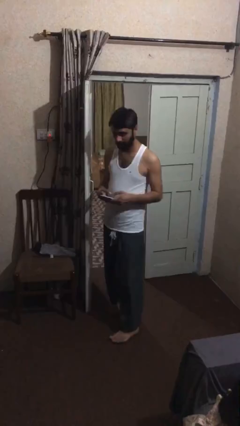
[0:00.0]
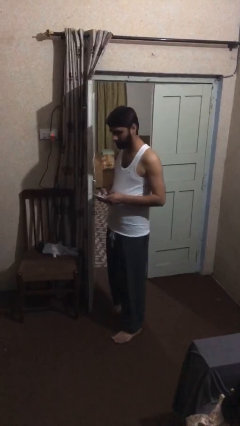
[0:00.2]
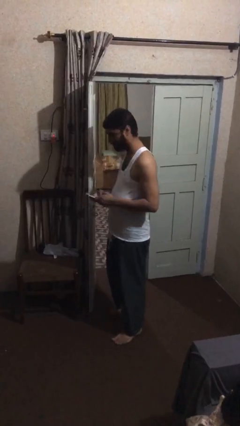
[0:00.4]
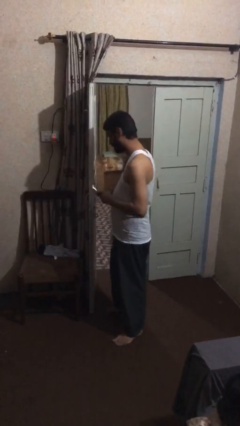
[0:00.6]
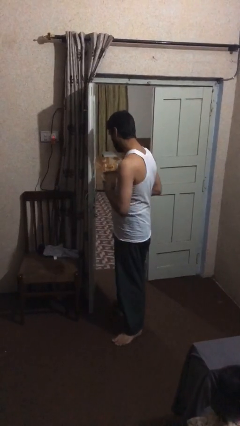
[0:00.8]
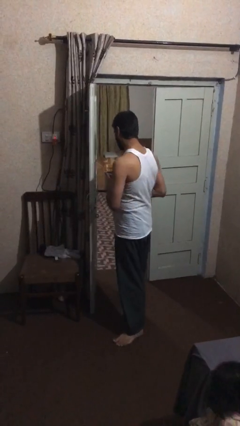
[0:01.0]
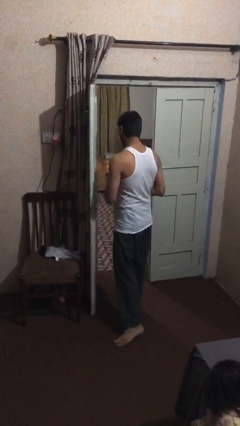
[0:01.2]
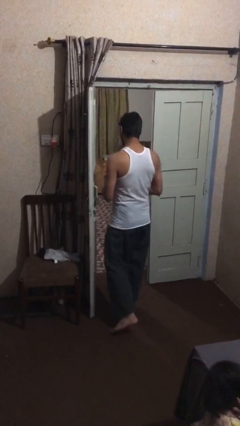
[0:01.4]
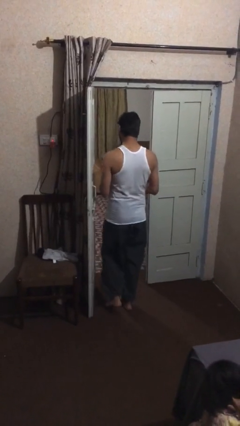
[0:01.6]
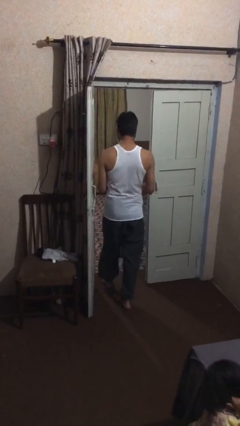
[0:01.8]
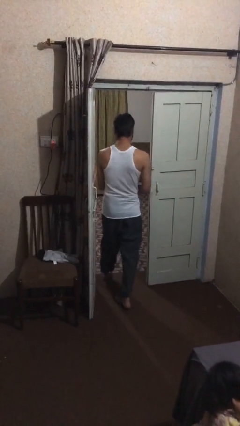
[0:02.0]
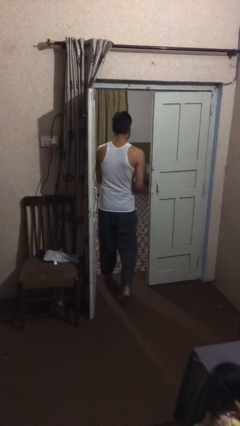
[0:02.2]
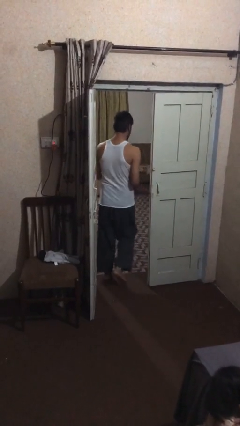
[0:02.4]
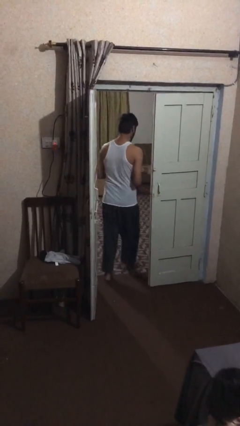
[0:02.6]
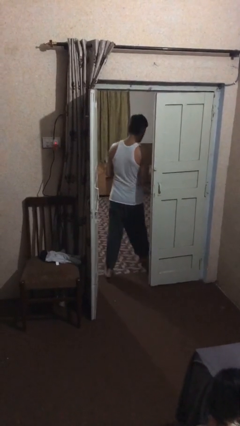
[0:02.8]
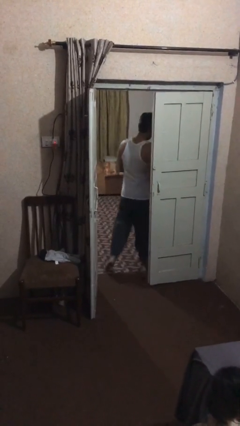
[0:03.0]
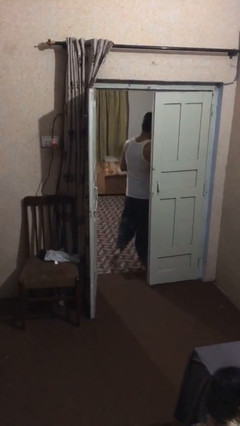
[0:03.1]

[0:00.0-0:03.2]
person exits scene through structure

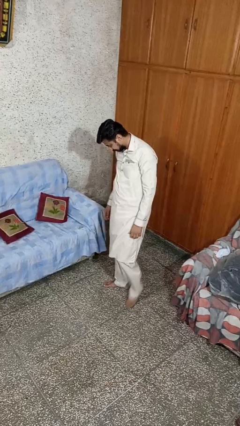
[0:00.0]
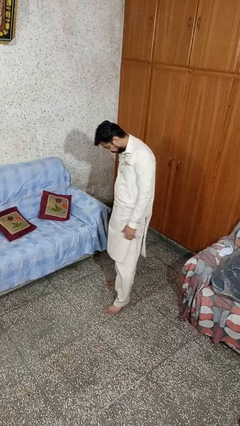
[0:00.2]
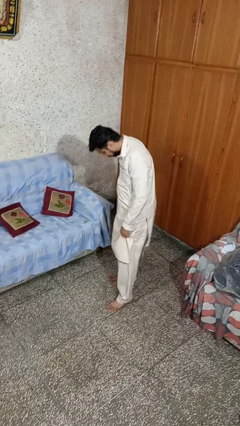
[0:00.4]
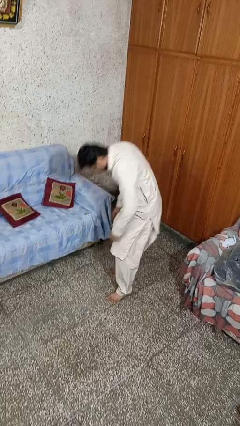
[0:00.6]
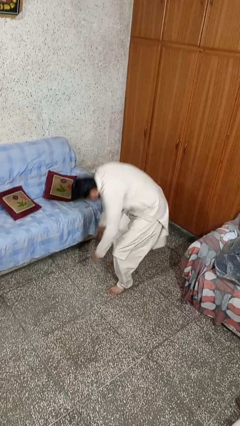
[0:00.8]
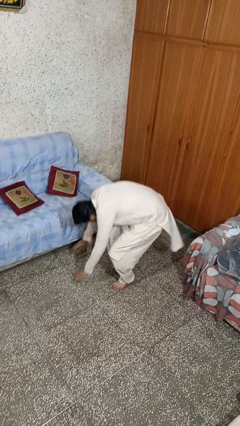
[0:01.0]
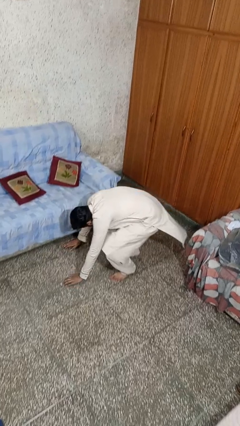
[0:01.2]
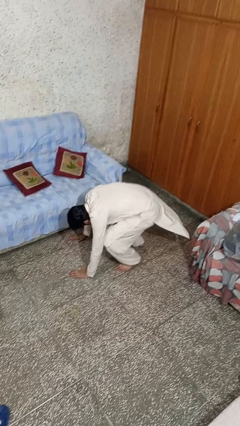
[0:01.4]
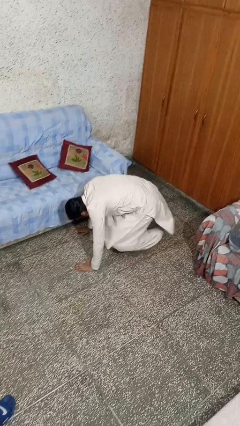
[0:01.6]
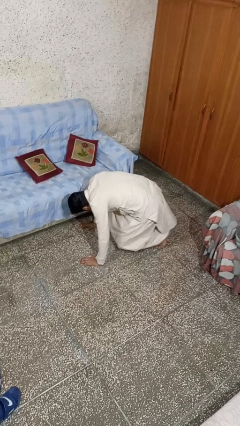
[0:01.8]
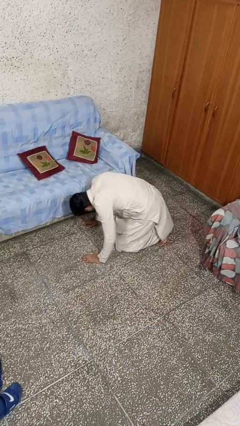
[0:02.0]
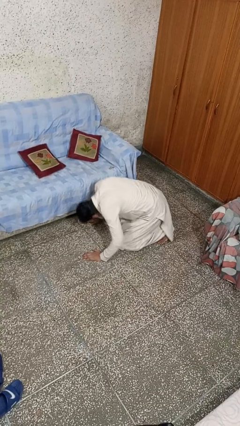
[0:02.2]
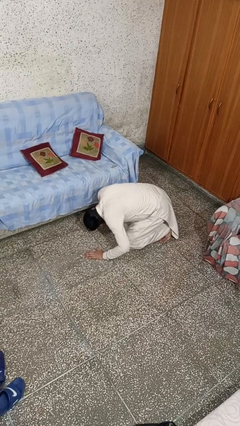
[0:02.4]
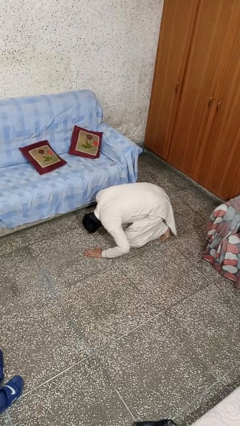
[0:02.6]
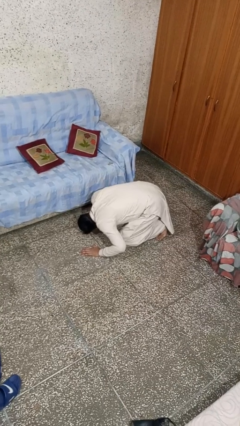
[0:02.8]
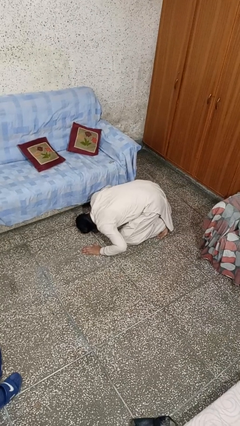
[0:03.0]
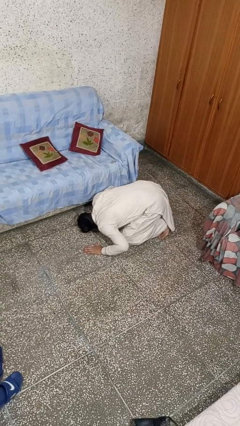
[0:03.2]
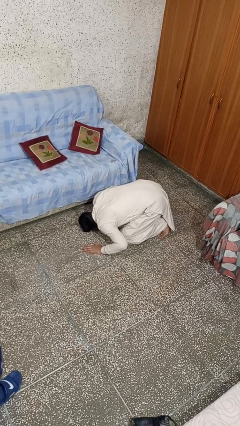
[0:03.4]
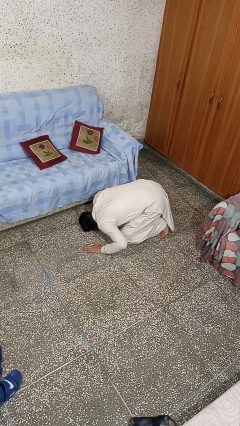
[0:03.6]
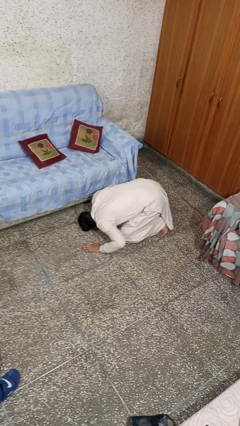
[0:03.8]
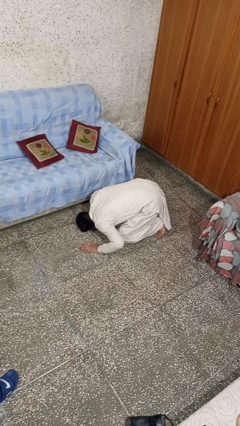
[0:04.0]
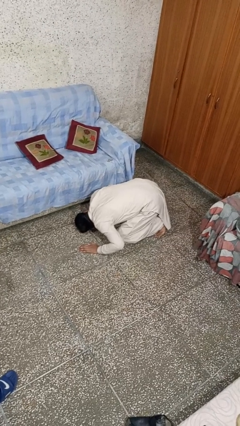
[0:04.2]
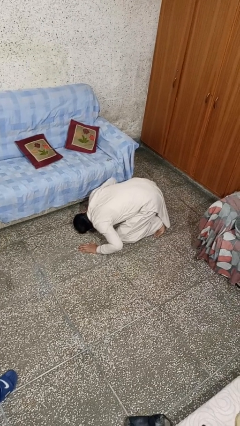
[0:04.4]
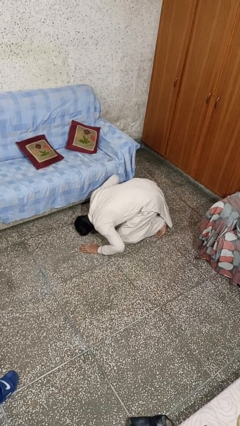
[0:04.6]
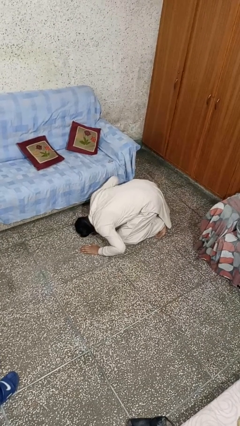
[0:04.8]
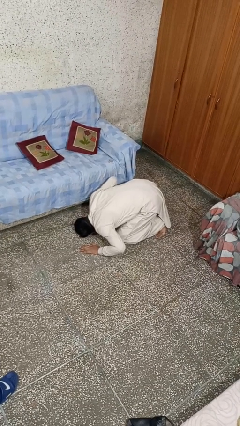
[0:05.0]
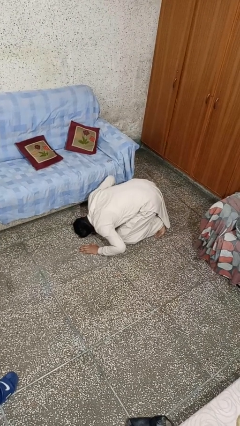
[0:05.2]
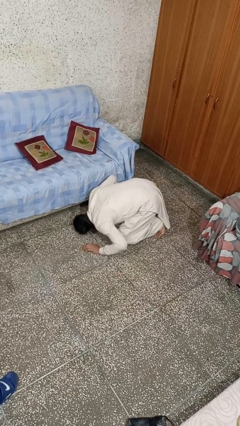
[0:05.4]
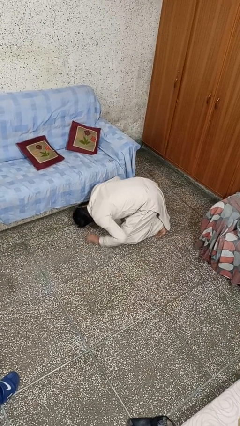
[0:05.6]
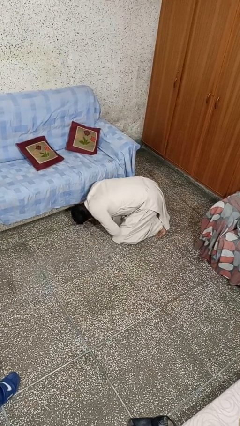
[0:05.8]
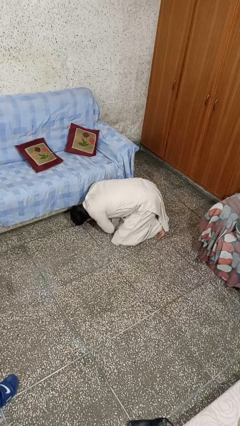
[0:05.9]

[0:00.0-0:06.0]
person searches under couch

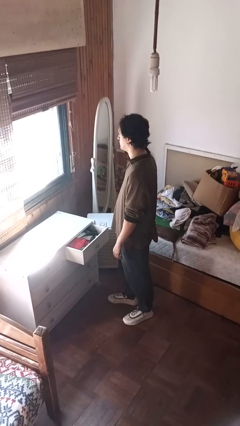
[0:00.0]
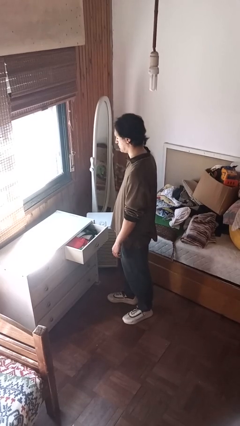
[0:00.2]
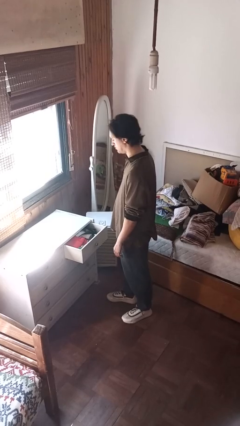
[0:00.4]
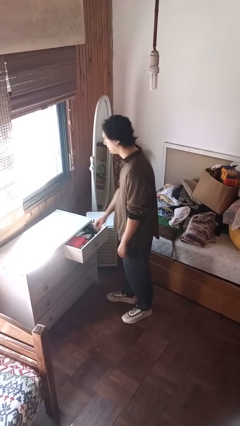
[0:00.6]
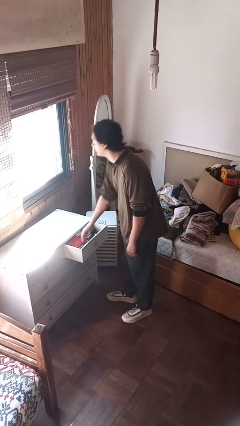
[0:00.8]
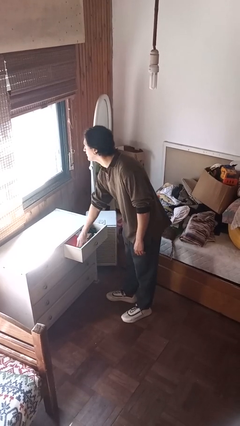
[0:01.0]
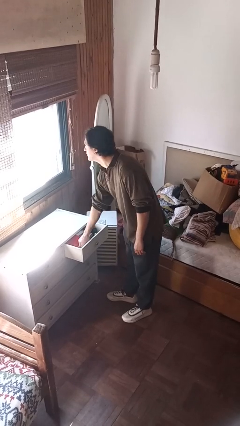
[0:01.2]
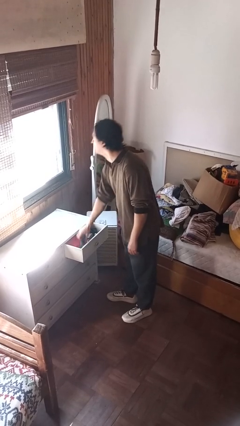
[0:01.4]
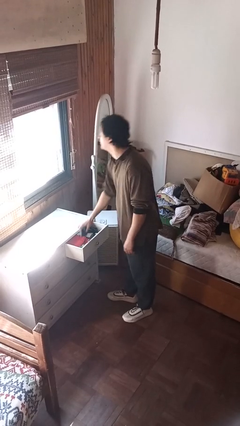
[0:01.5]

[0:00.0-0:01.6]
person takes clothes from dresser

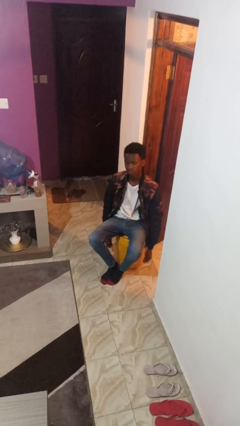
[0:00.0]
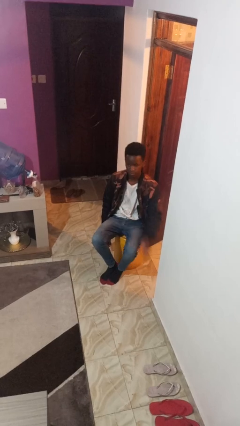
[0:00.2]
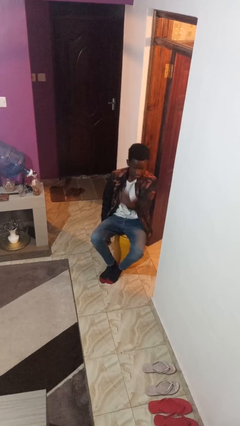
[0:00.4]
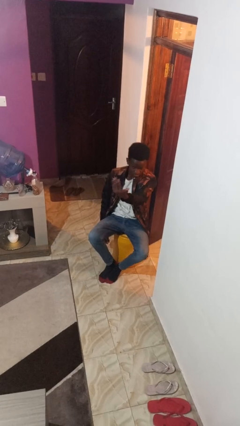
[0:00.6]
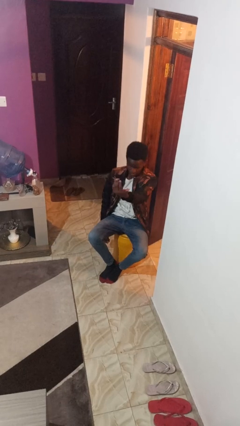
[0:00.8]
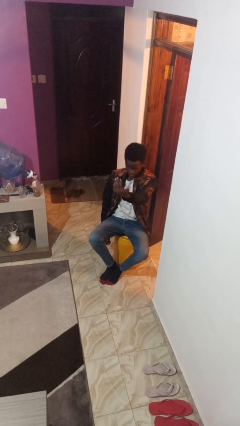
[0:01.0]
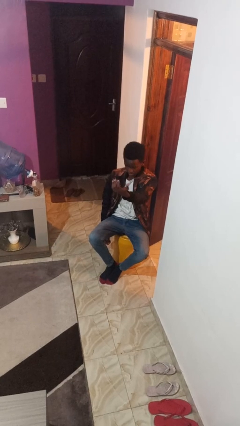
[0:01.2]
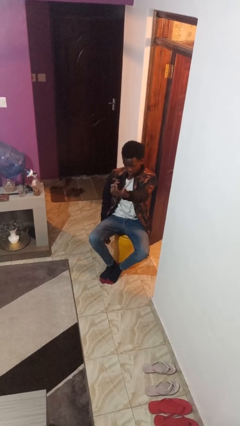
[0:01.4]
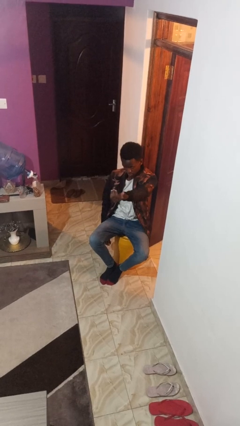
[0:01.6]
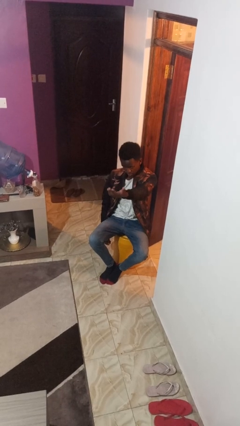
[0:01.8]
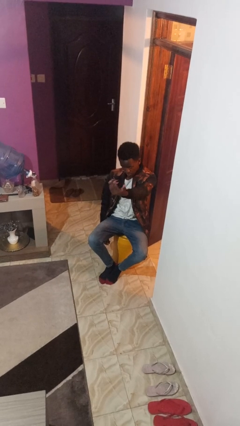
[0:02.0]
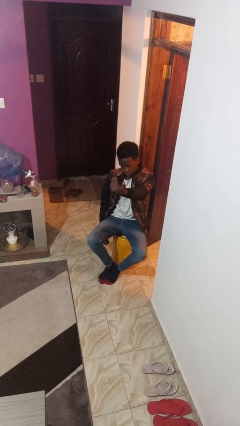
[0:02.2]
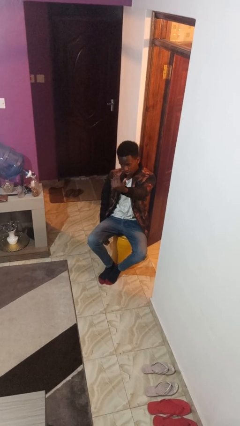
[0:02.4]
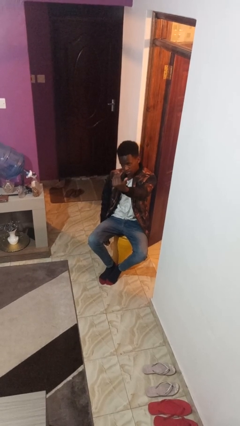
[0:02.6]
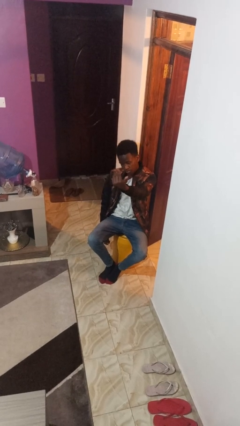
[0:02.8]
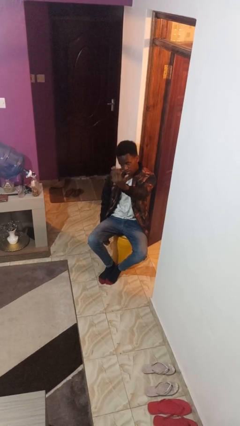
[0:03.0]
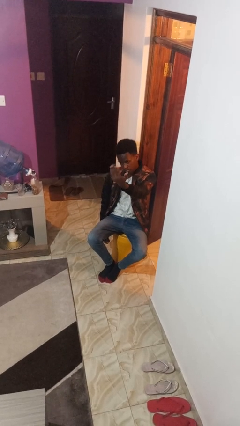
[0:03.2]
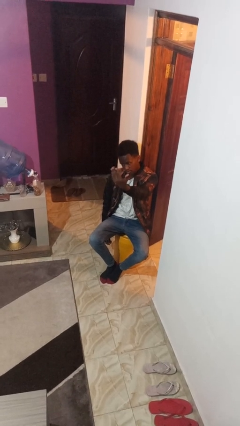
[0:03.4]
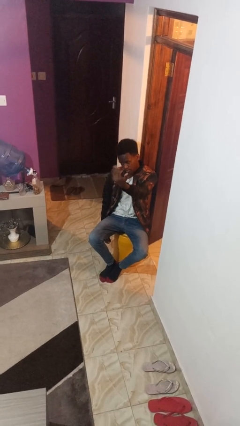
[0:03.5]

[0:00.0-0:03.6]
person gestures come here

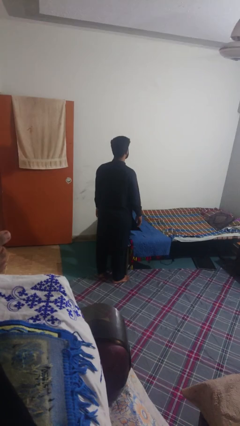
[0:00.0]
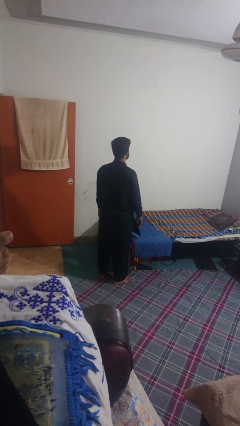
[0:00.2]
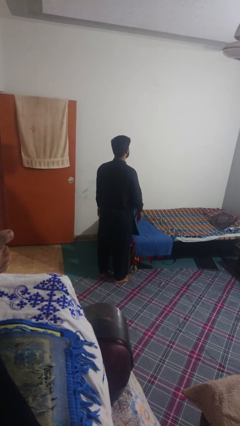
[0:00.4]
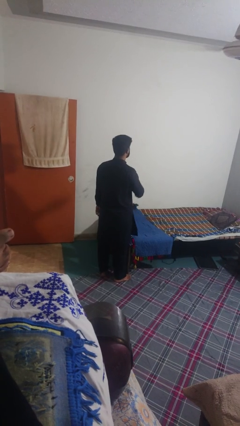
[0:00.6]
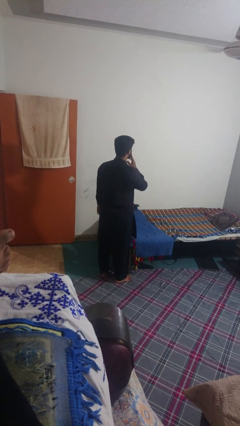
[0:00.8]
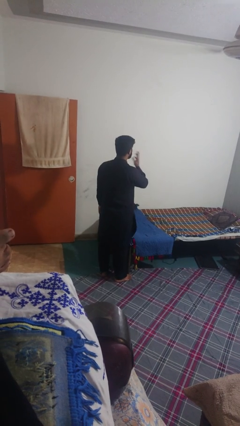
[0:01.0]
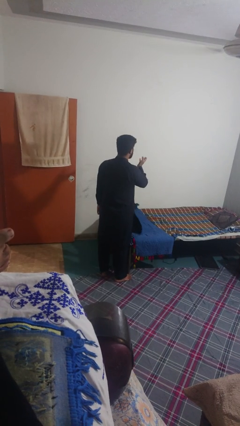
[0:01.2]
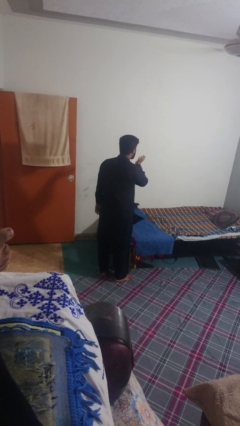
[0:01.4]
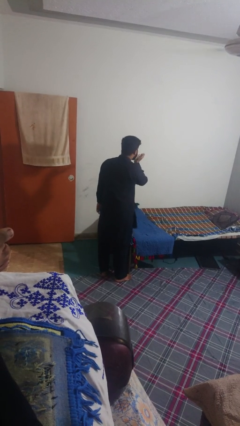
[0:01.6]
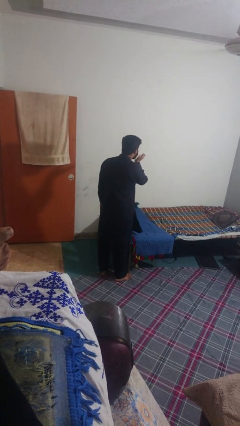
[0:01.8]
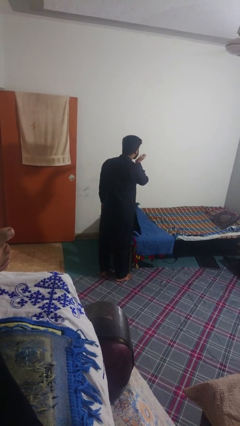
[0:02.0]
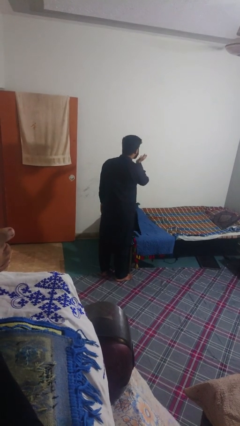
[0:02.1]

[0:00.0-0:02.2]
person gestures blow kiss

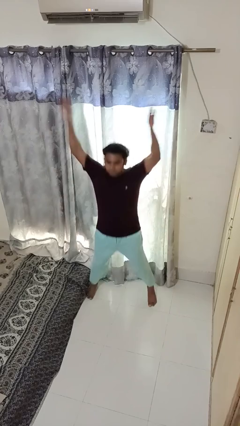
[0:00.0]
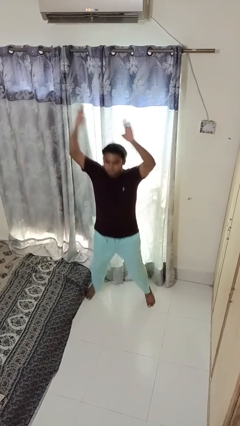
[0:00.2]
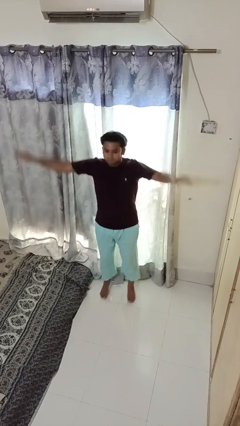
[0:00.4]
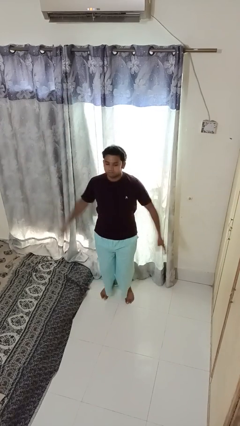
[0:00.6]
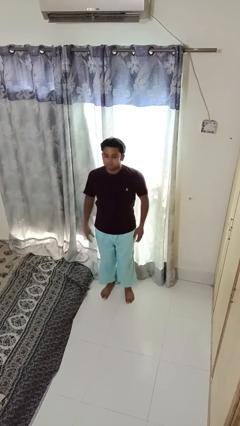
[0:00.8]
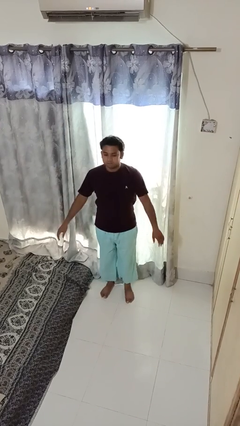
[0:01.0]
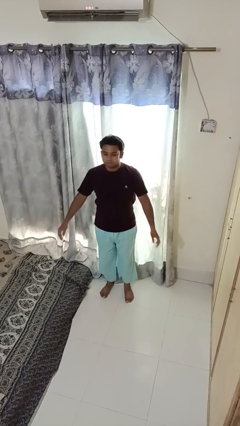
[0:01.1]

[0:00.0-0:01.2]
person exercises with jumping jacks
